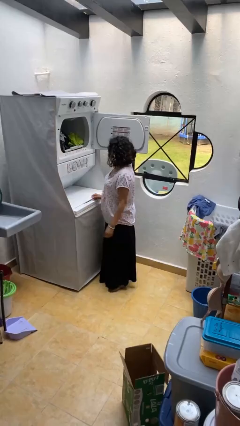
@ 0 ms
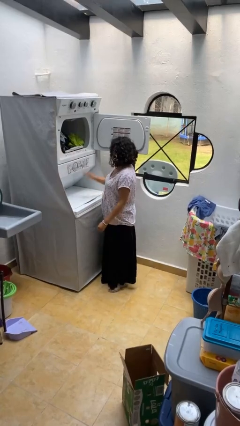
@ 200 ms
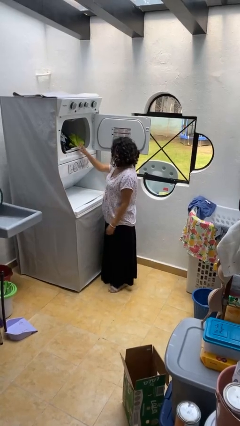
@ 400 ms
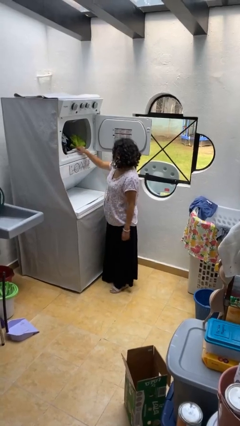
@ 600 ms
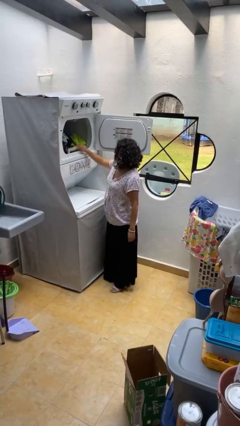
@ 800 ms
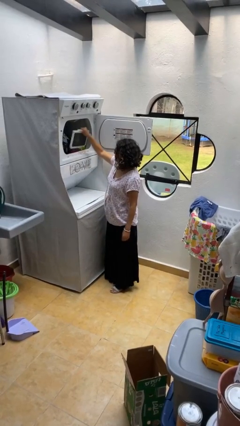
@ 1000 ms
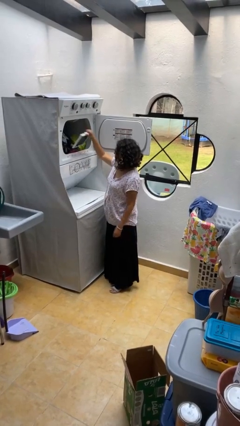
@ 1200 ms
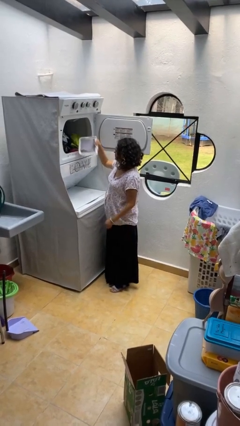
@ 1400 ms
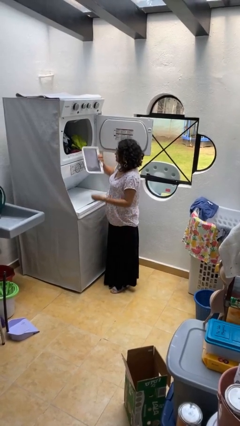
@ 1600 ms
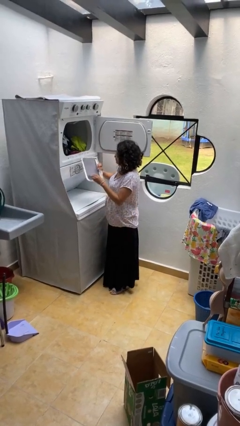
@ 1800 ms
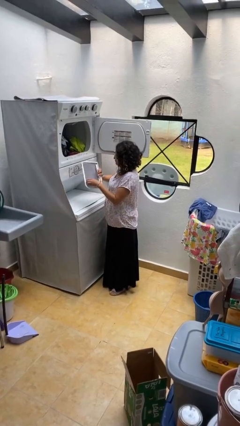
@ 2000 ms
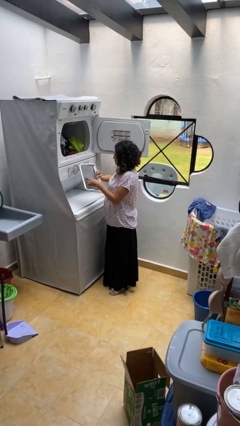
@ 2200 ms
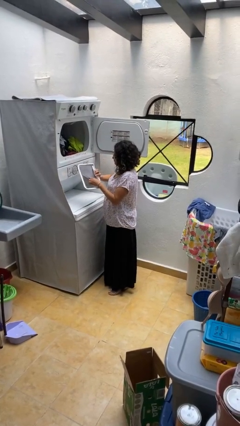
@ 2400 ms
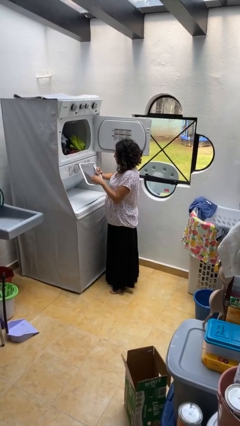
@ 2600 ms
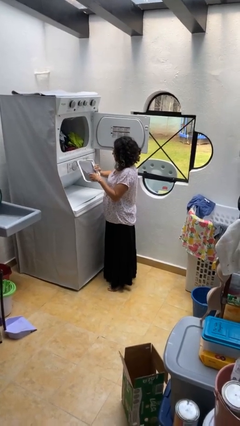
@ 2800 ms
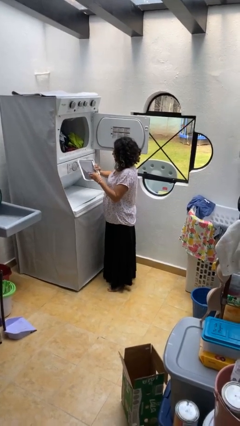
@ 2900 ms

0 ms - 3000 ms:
person cleans dryer lint trap

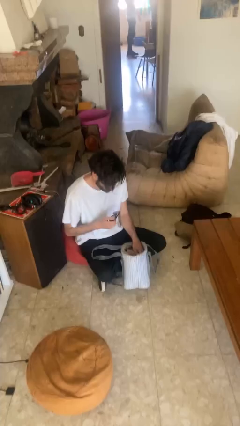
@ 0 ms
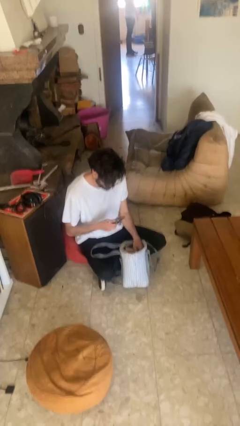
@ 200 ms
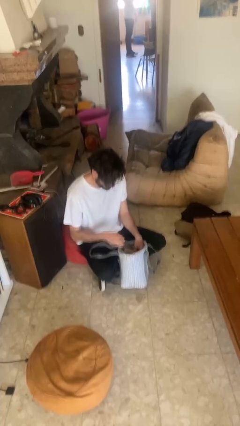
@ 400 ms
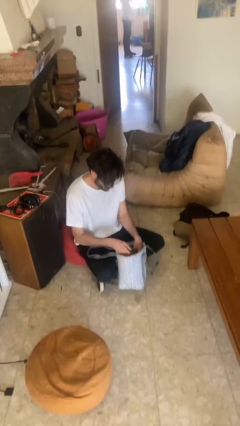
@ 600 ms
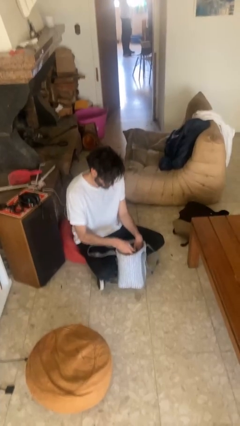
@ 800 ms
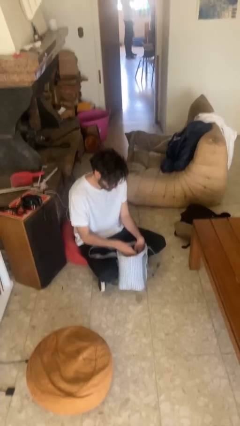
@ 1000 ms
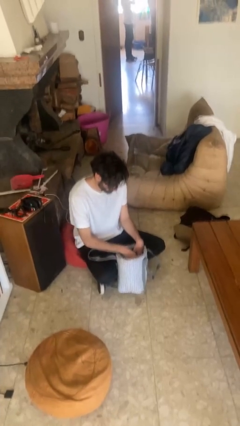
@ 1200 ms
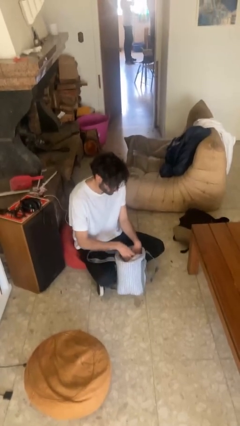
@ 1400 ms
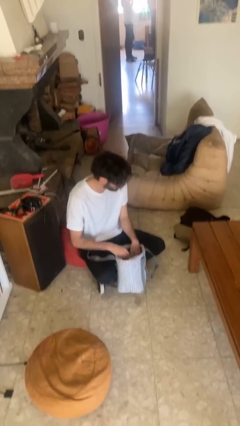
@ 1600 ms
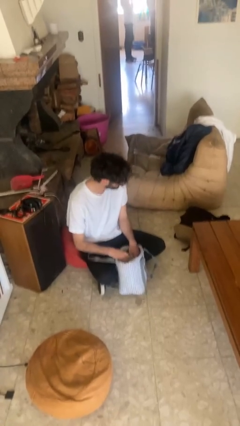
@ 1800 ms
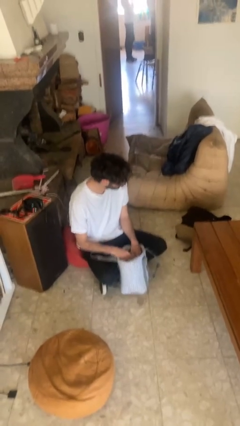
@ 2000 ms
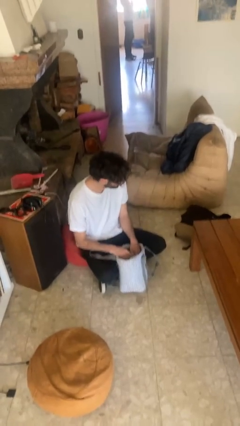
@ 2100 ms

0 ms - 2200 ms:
person puts object into purse

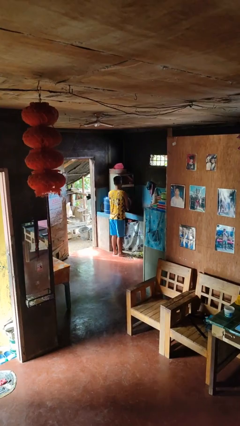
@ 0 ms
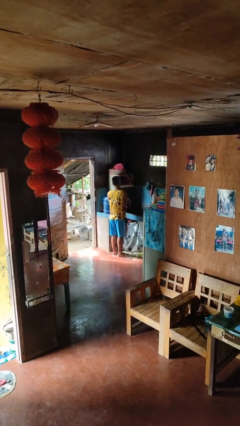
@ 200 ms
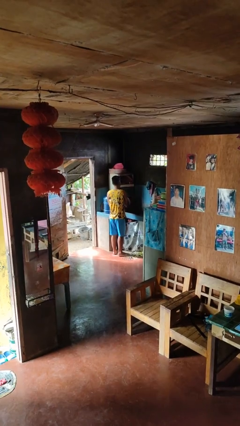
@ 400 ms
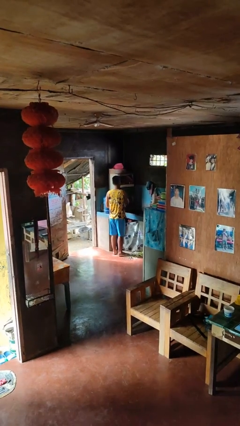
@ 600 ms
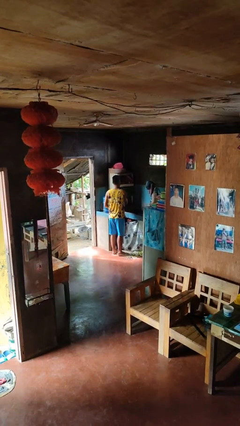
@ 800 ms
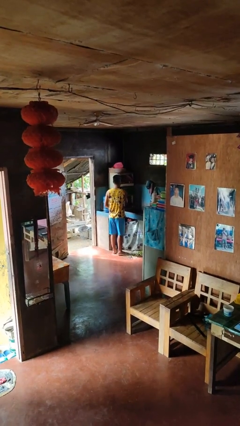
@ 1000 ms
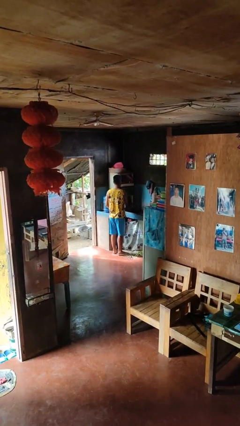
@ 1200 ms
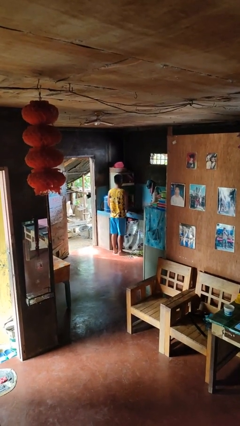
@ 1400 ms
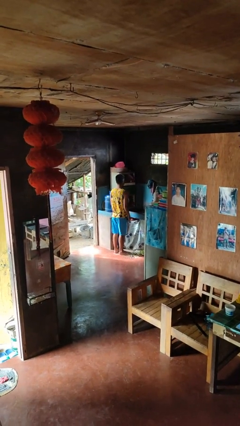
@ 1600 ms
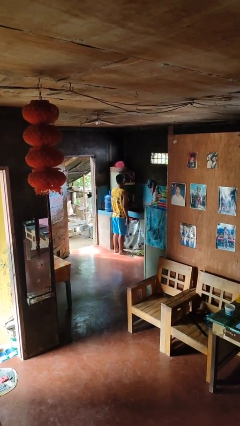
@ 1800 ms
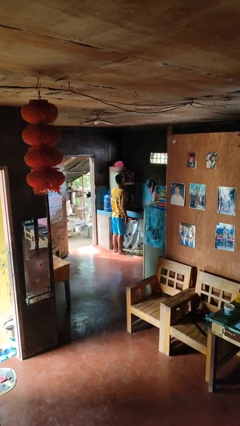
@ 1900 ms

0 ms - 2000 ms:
person closes dishwasher

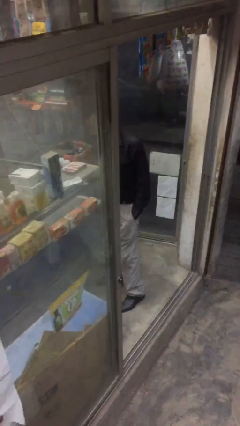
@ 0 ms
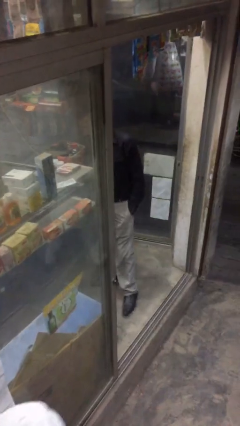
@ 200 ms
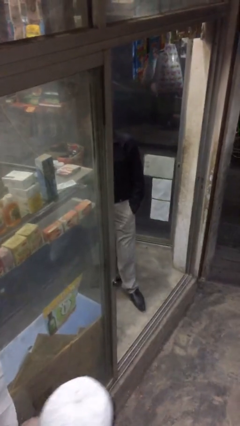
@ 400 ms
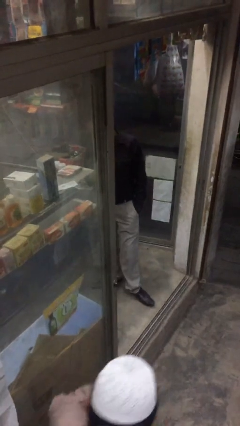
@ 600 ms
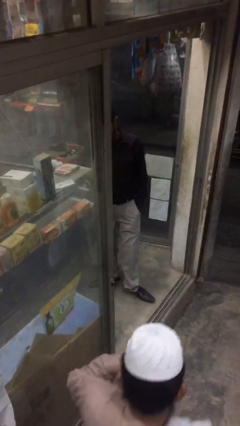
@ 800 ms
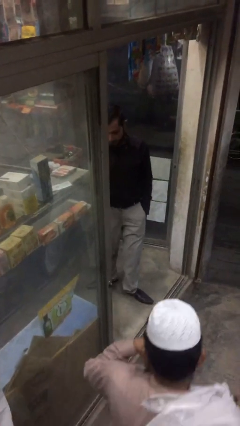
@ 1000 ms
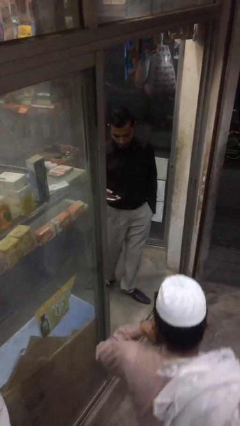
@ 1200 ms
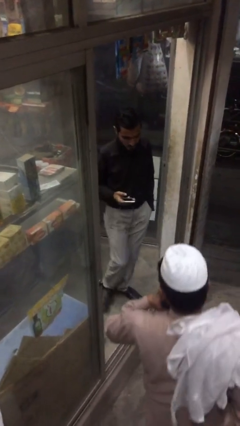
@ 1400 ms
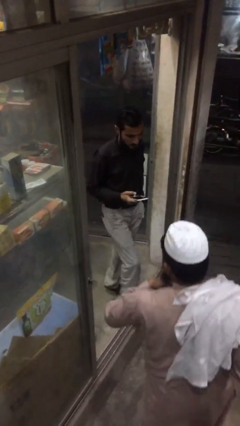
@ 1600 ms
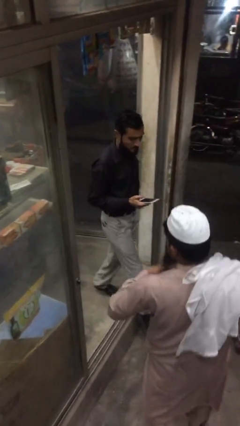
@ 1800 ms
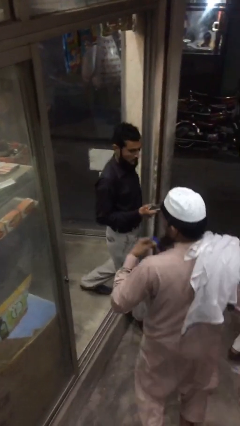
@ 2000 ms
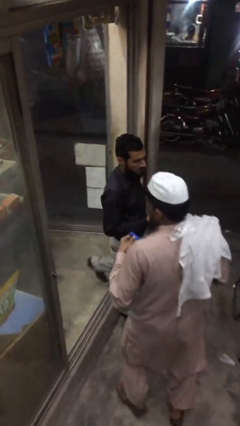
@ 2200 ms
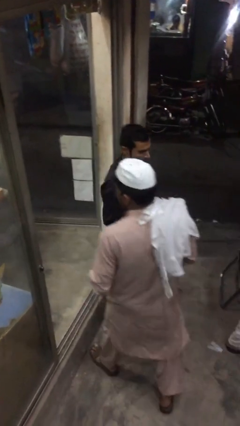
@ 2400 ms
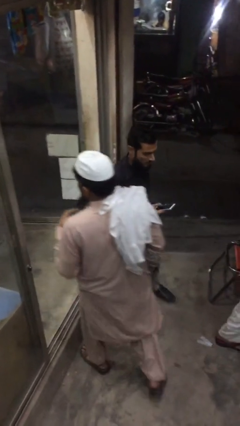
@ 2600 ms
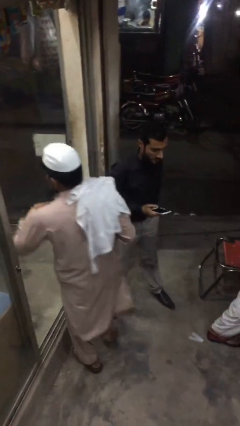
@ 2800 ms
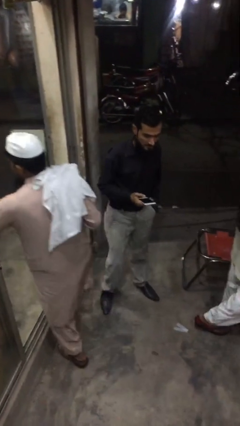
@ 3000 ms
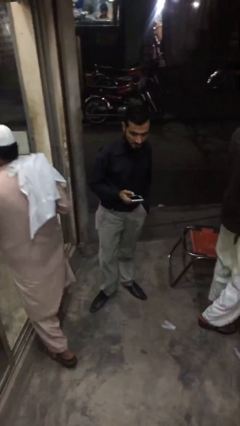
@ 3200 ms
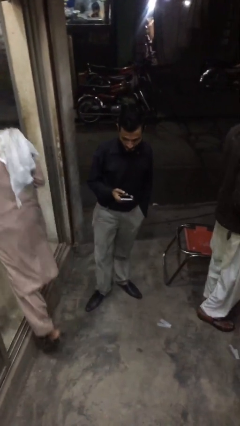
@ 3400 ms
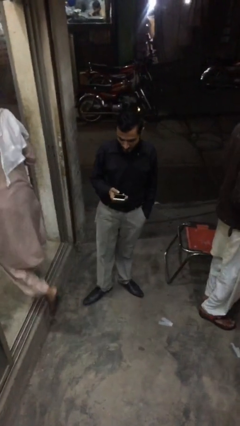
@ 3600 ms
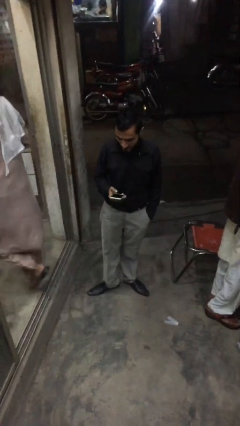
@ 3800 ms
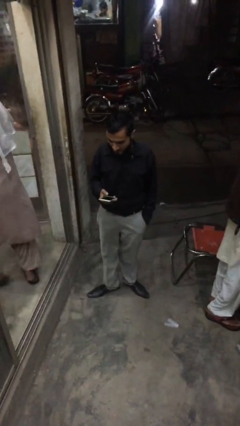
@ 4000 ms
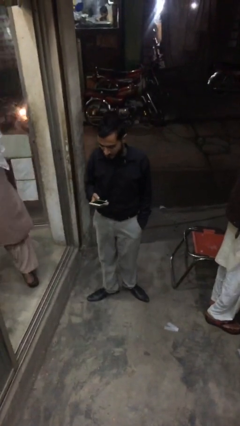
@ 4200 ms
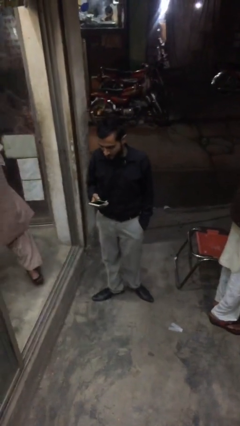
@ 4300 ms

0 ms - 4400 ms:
person exits scene through structure

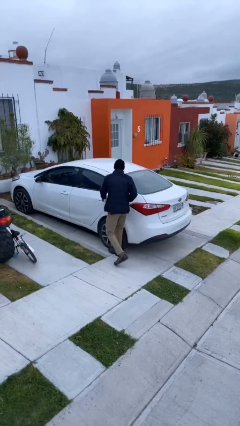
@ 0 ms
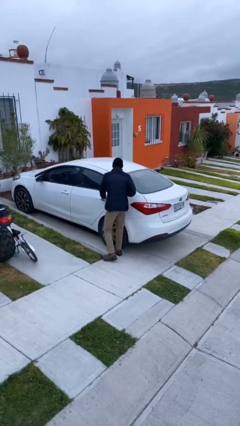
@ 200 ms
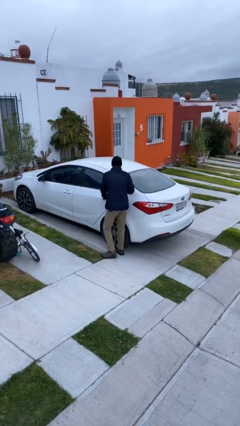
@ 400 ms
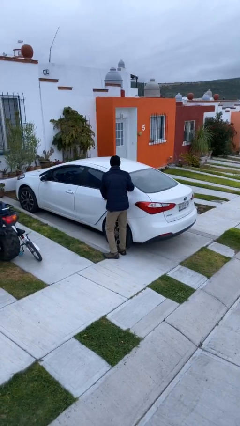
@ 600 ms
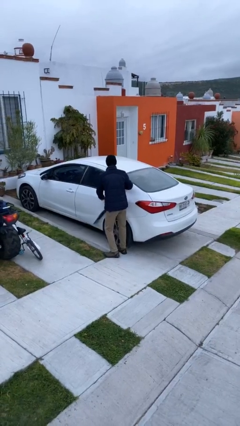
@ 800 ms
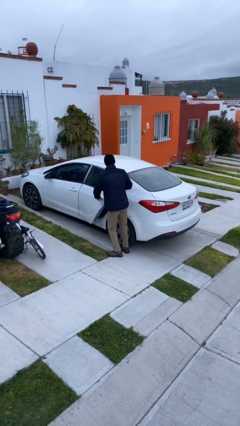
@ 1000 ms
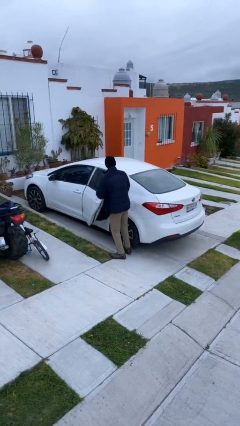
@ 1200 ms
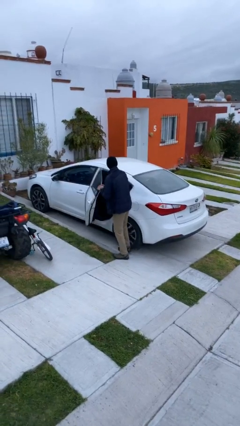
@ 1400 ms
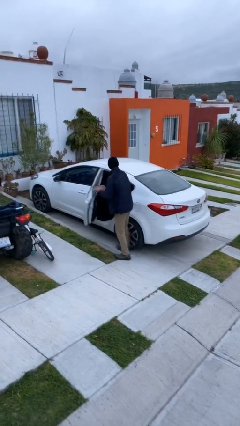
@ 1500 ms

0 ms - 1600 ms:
person opens car door

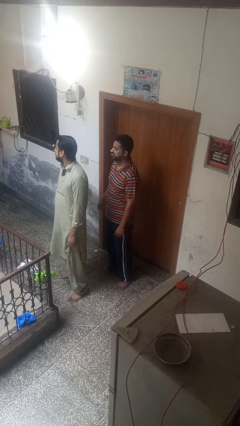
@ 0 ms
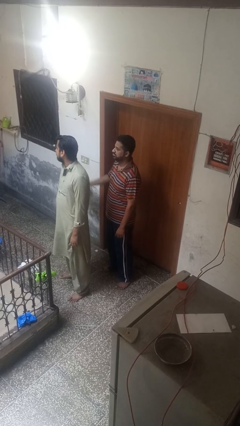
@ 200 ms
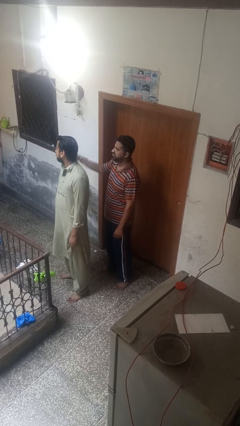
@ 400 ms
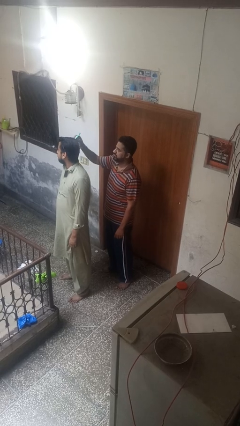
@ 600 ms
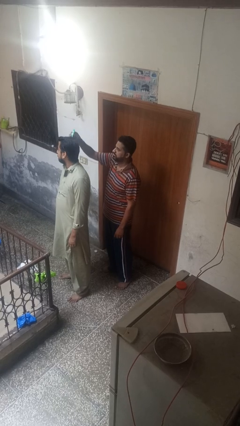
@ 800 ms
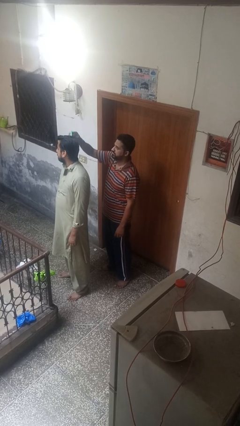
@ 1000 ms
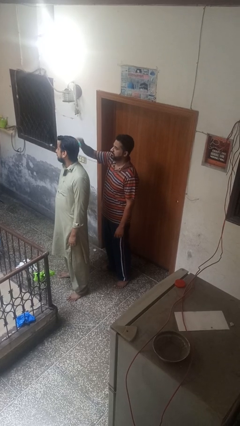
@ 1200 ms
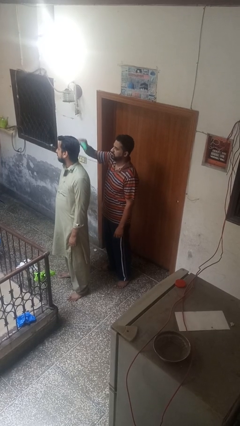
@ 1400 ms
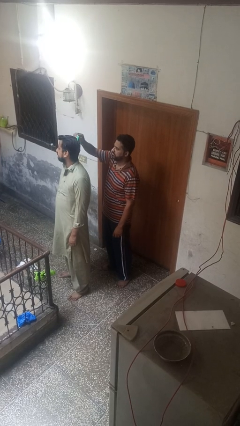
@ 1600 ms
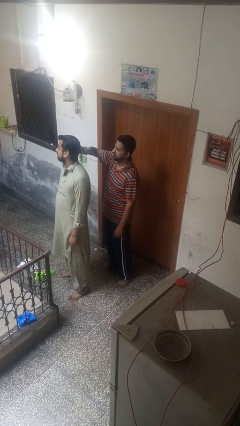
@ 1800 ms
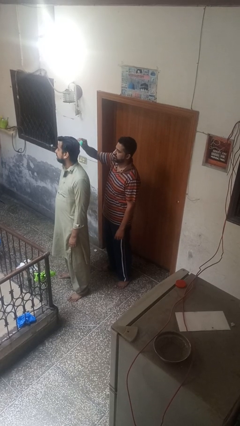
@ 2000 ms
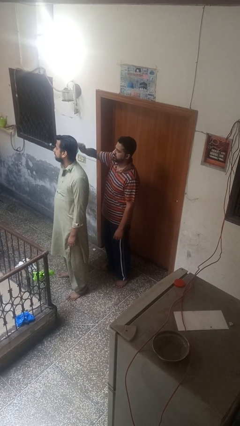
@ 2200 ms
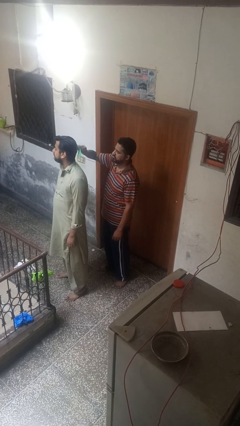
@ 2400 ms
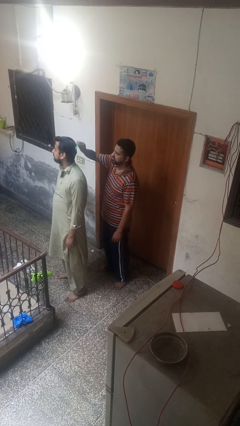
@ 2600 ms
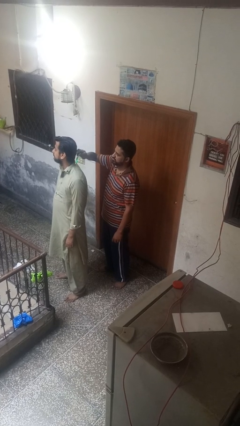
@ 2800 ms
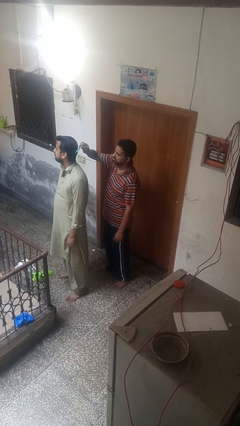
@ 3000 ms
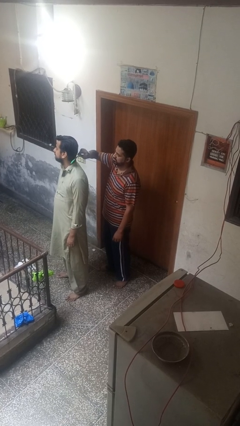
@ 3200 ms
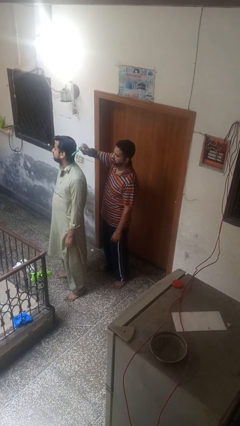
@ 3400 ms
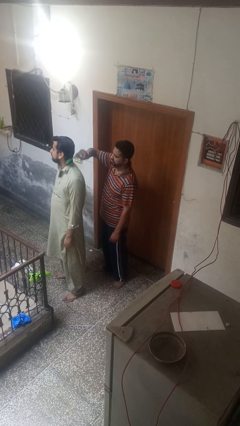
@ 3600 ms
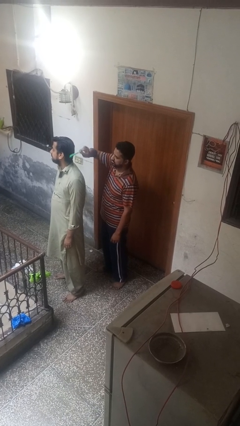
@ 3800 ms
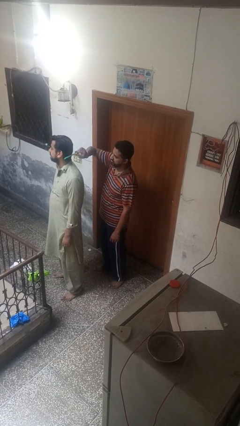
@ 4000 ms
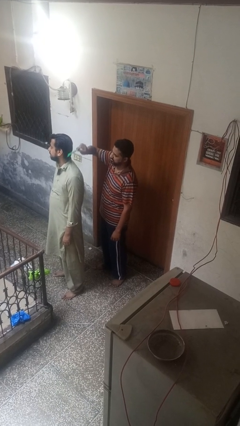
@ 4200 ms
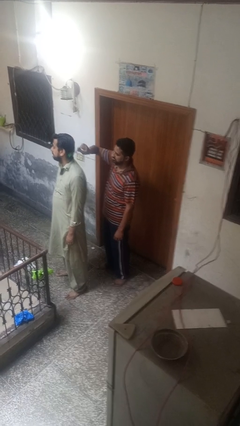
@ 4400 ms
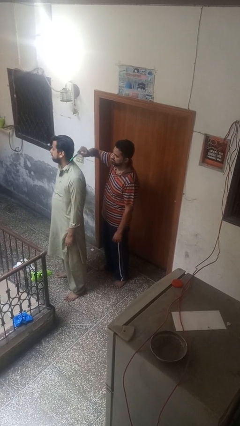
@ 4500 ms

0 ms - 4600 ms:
person brushes hair of person
